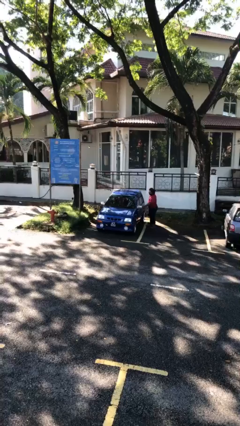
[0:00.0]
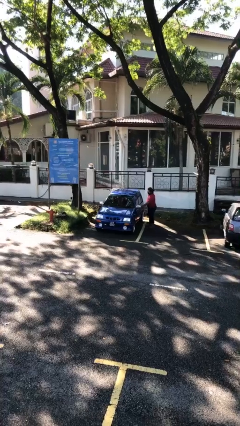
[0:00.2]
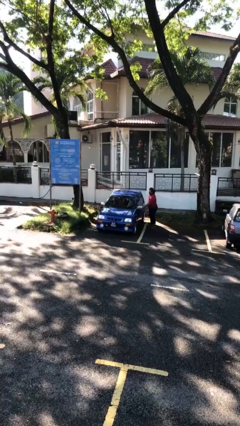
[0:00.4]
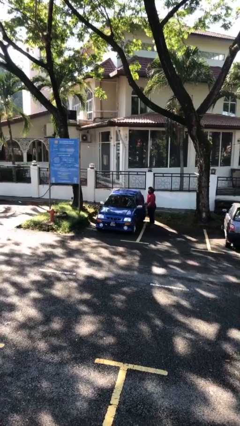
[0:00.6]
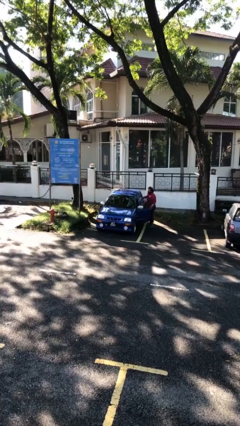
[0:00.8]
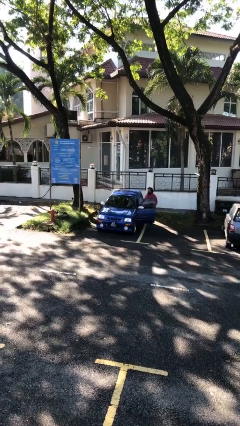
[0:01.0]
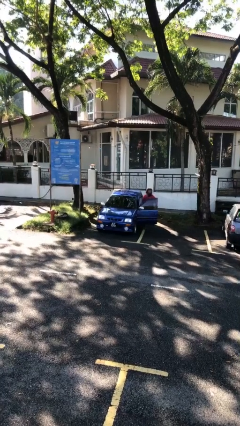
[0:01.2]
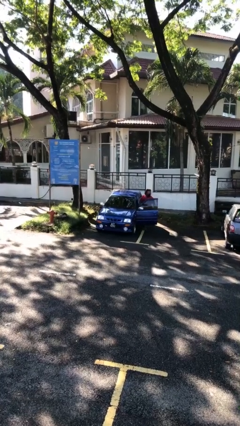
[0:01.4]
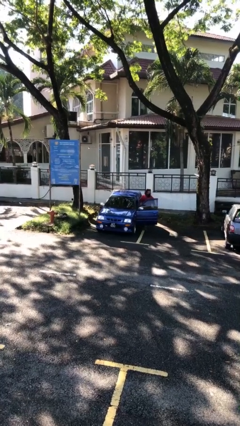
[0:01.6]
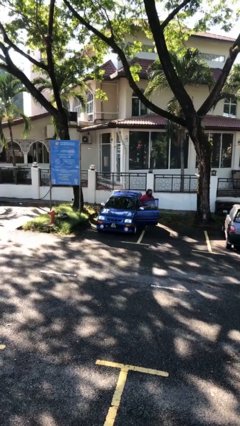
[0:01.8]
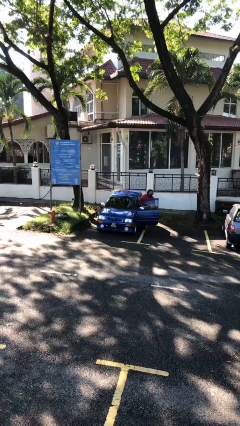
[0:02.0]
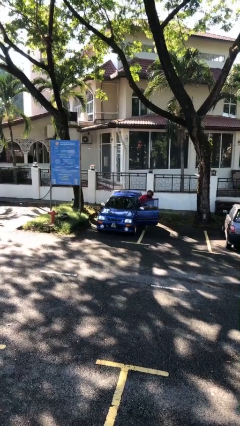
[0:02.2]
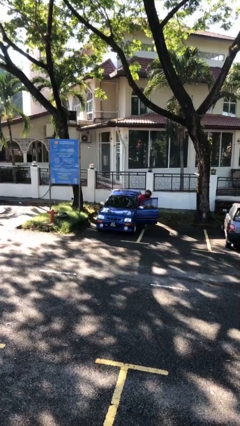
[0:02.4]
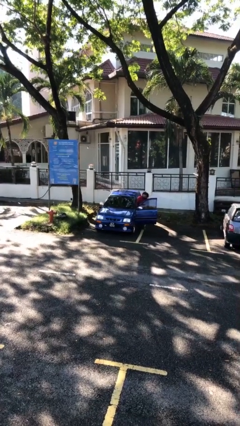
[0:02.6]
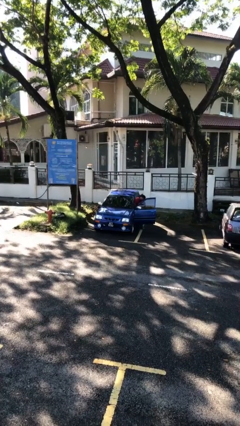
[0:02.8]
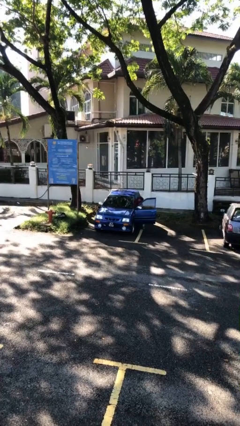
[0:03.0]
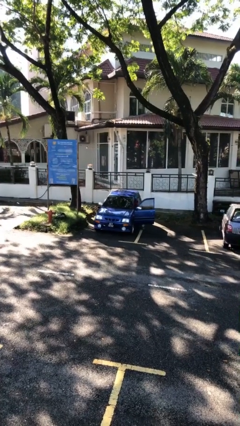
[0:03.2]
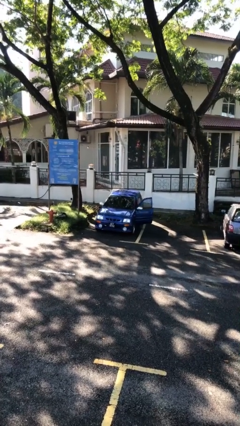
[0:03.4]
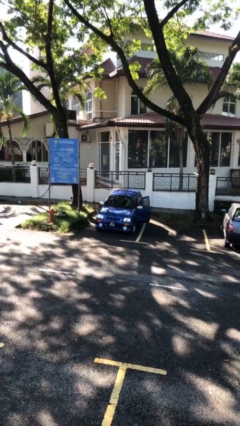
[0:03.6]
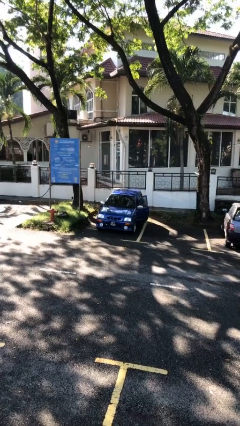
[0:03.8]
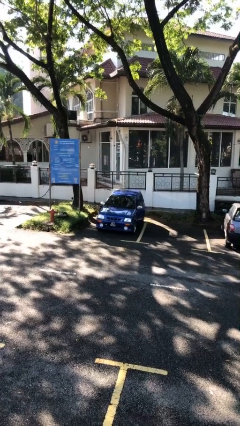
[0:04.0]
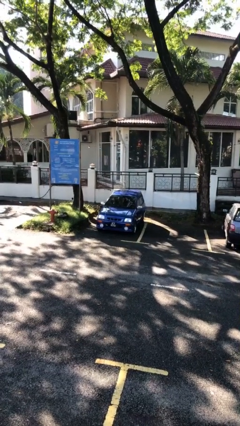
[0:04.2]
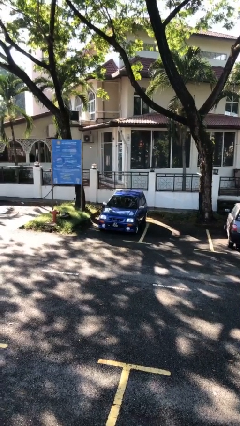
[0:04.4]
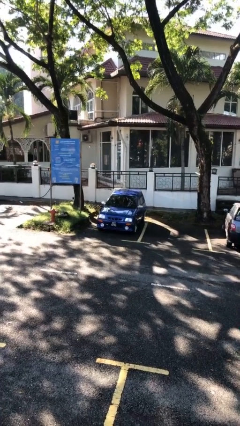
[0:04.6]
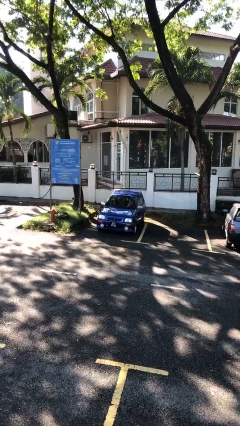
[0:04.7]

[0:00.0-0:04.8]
car picks up person

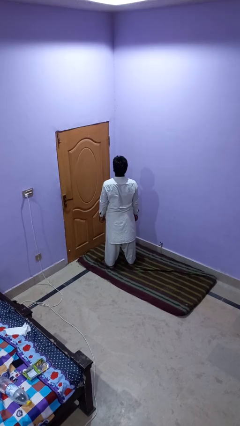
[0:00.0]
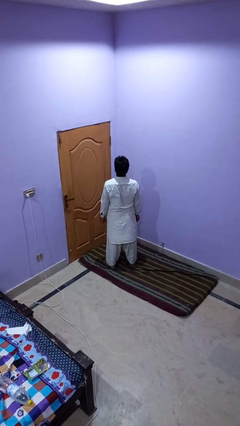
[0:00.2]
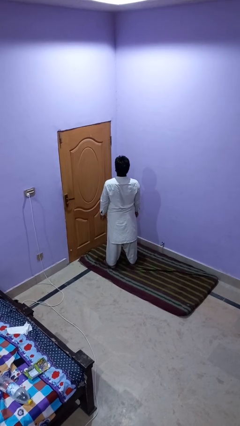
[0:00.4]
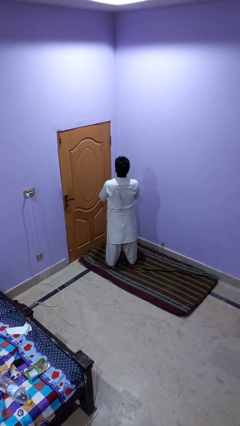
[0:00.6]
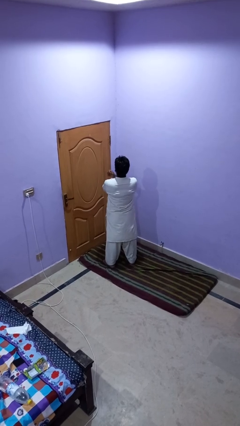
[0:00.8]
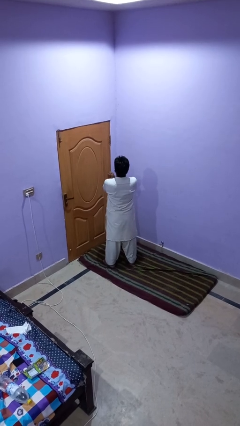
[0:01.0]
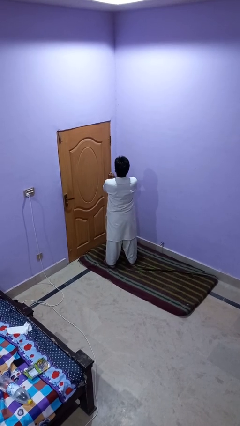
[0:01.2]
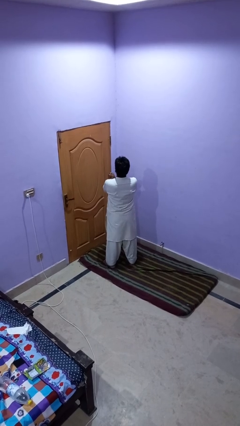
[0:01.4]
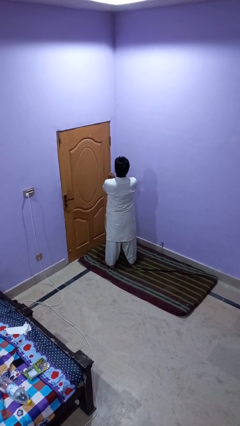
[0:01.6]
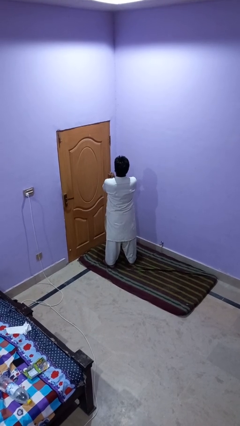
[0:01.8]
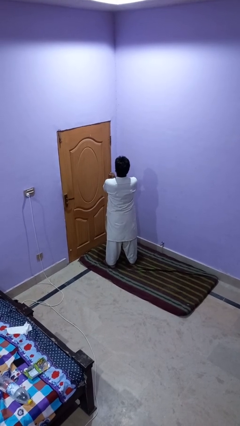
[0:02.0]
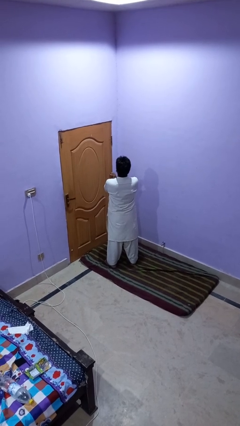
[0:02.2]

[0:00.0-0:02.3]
person crosses arms

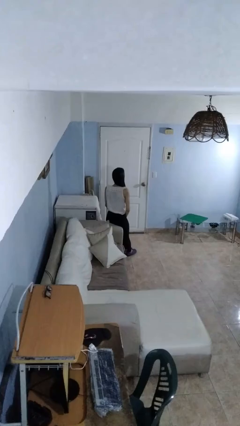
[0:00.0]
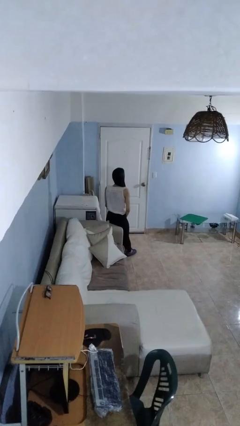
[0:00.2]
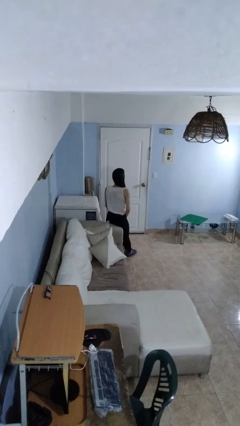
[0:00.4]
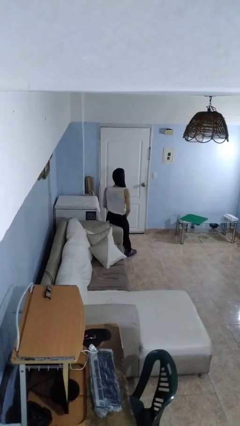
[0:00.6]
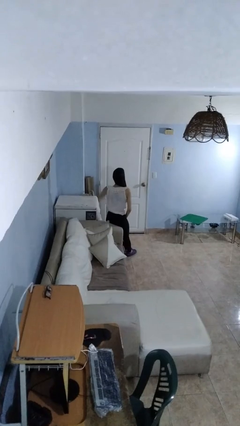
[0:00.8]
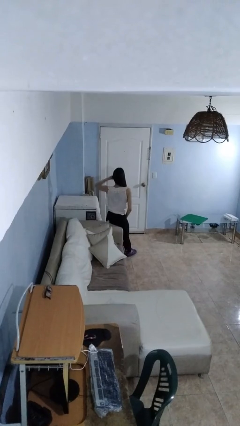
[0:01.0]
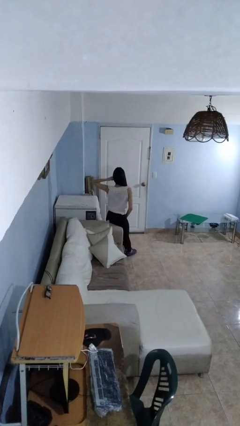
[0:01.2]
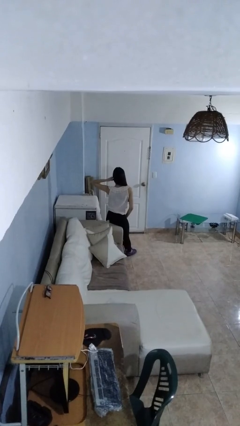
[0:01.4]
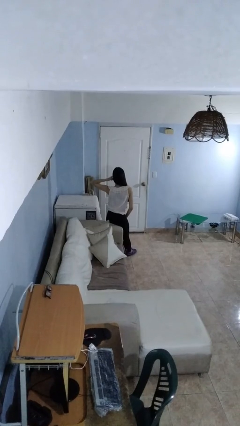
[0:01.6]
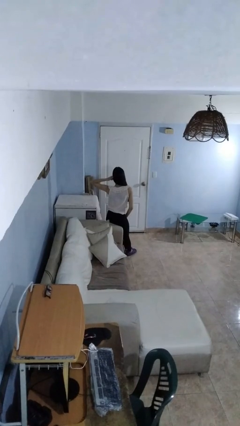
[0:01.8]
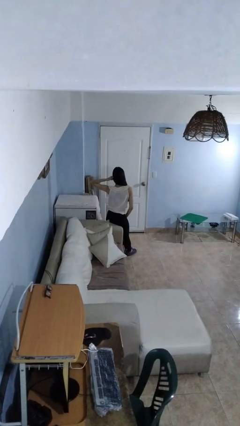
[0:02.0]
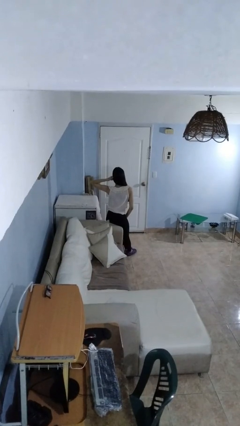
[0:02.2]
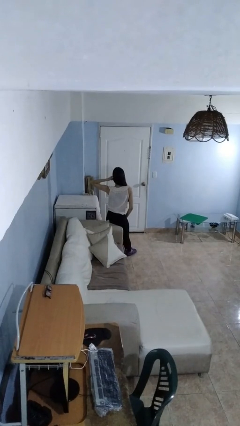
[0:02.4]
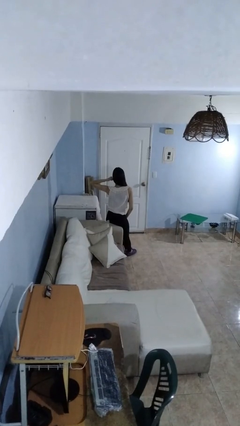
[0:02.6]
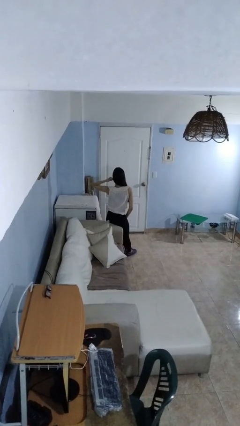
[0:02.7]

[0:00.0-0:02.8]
person gestures call me

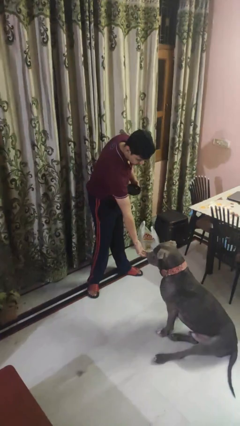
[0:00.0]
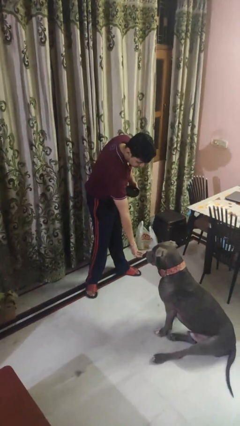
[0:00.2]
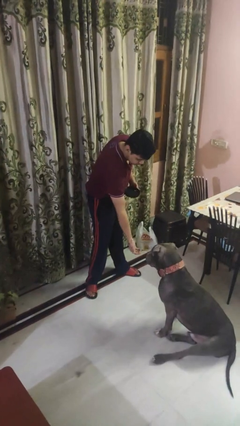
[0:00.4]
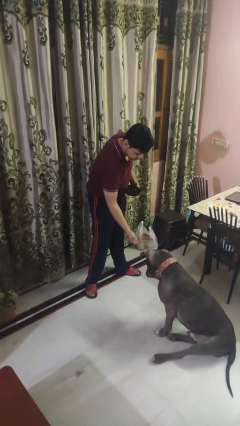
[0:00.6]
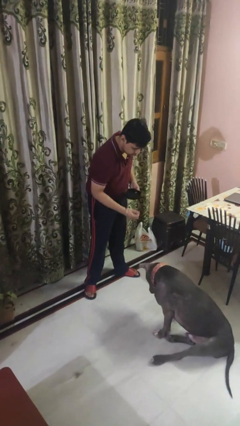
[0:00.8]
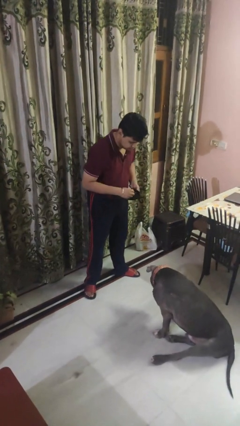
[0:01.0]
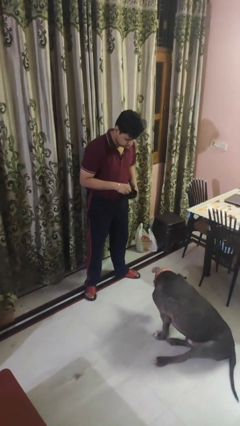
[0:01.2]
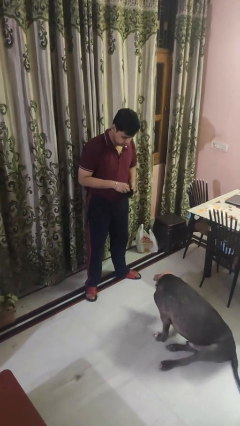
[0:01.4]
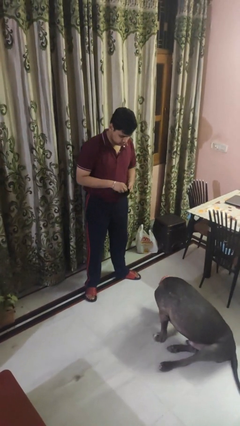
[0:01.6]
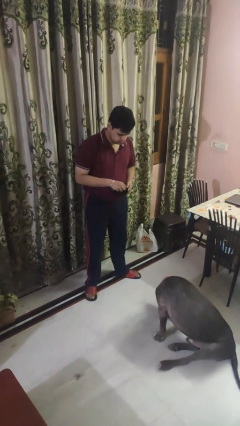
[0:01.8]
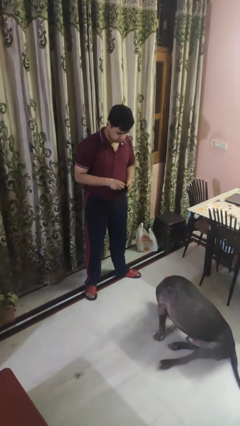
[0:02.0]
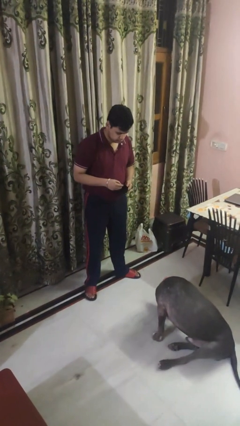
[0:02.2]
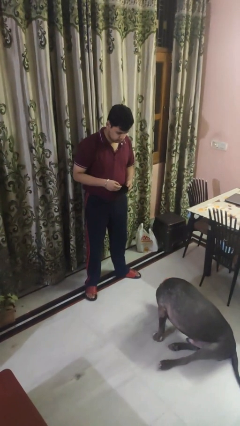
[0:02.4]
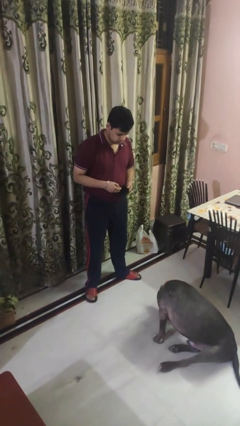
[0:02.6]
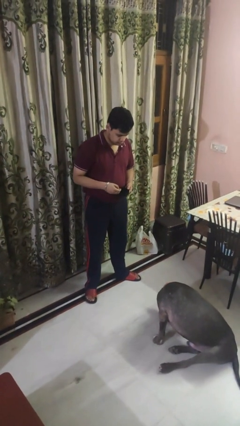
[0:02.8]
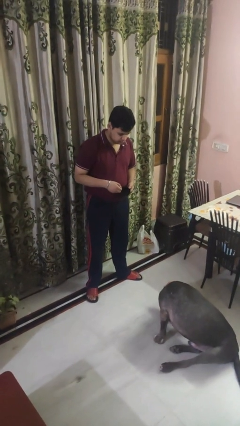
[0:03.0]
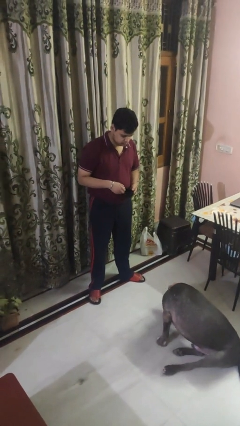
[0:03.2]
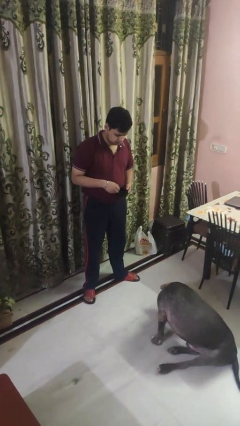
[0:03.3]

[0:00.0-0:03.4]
person feeds dog

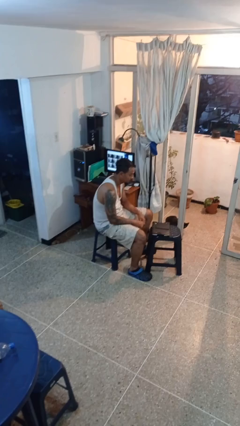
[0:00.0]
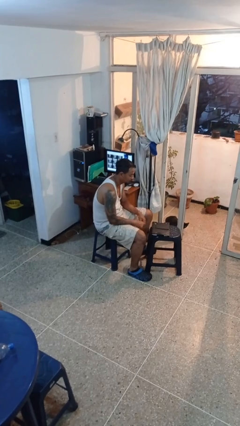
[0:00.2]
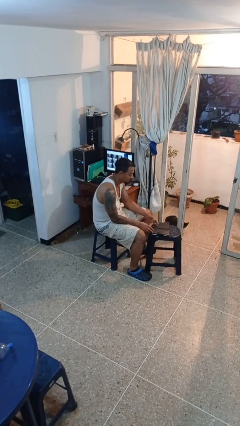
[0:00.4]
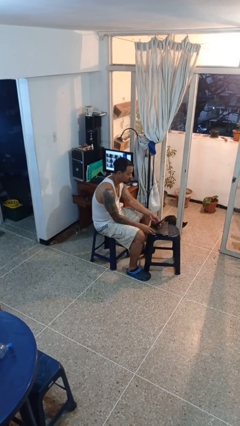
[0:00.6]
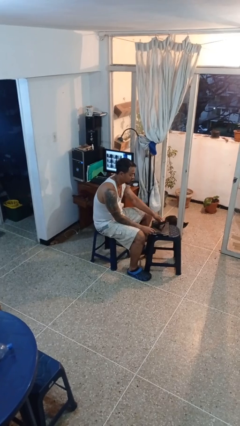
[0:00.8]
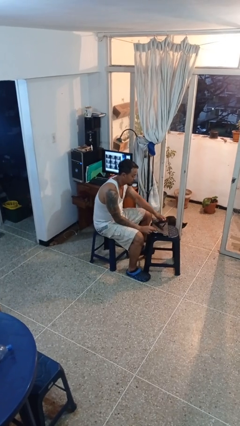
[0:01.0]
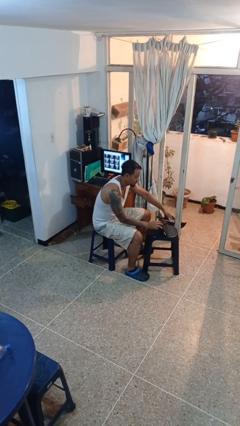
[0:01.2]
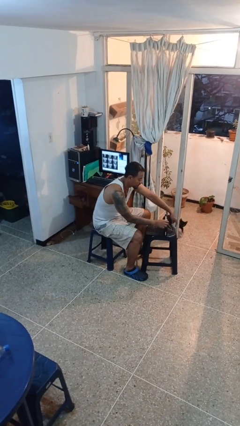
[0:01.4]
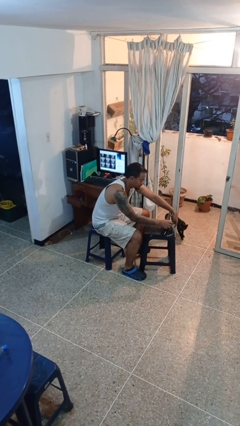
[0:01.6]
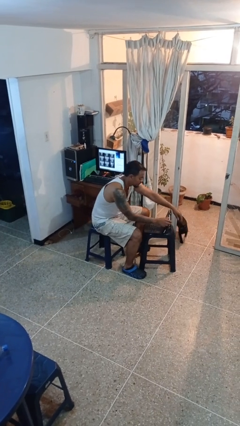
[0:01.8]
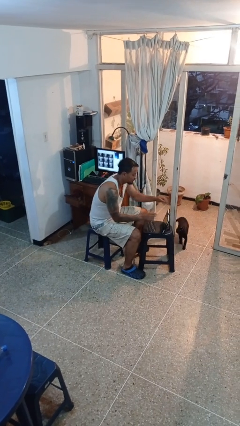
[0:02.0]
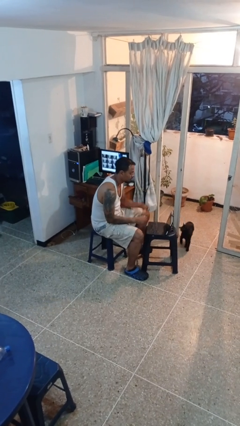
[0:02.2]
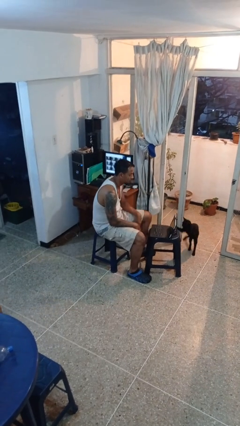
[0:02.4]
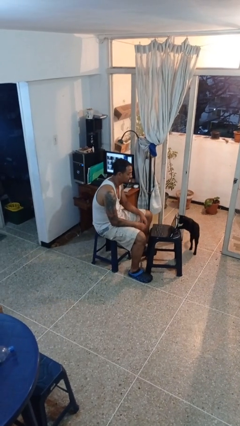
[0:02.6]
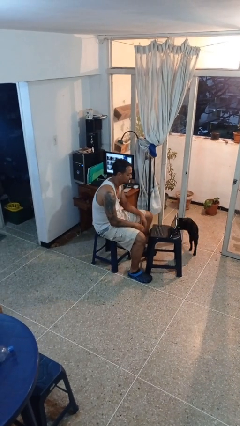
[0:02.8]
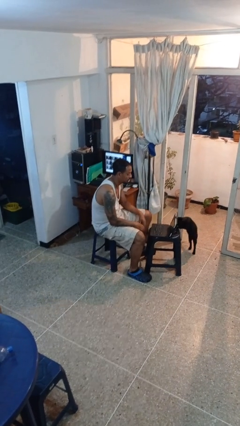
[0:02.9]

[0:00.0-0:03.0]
person opens laptop

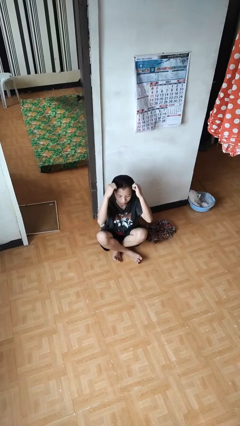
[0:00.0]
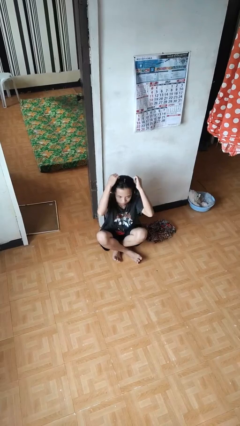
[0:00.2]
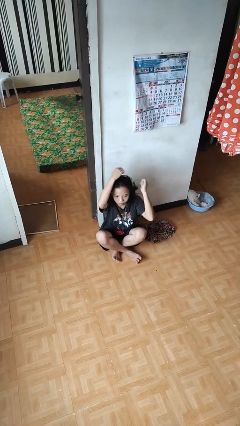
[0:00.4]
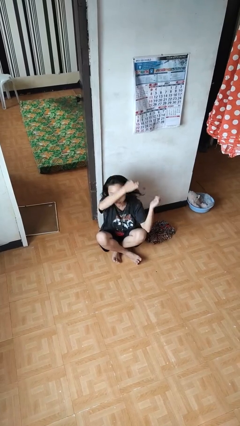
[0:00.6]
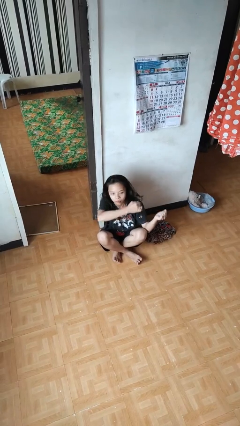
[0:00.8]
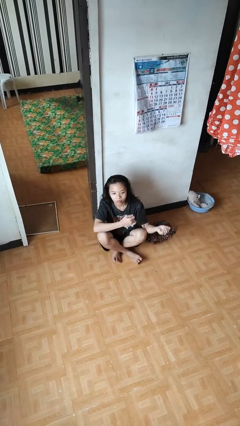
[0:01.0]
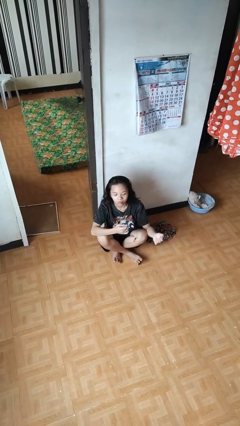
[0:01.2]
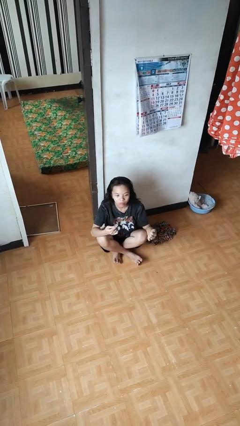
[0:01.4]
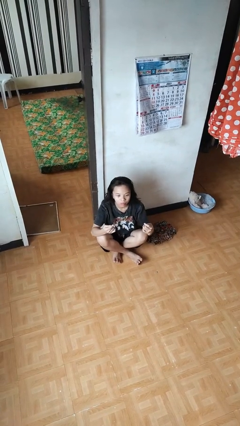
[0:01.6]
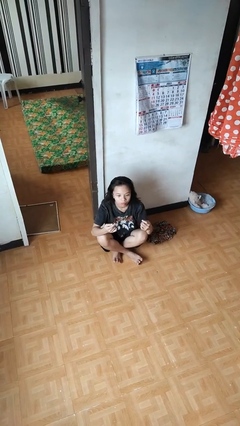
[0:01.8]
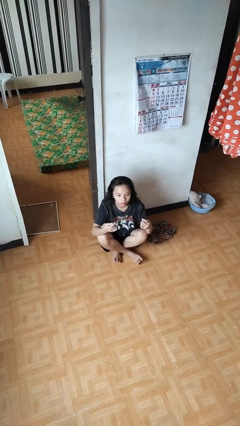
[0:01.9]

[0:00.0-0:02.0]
person takes off necklace
